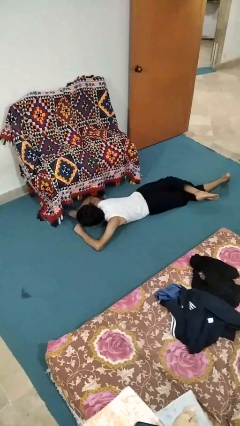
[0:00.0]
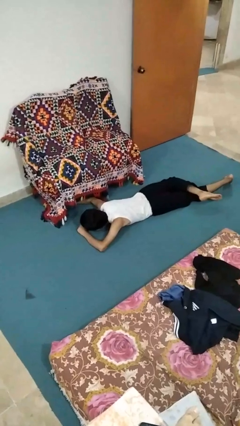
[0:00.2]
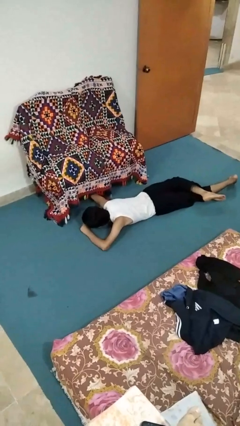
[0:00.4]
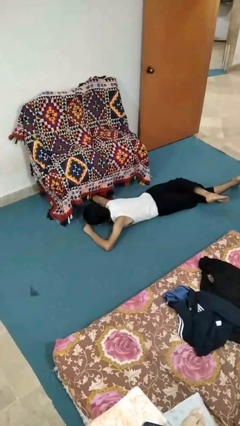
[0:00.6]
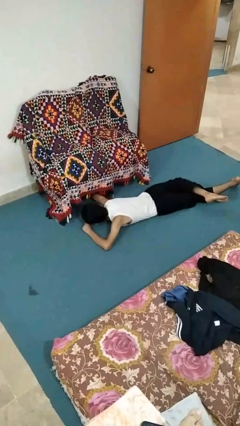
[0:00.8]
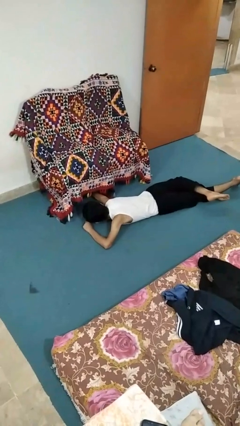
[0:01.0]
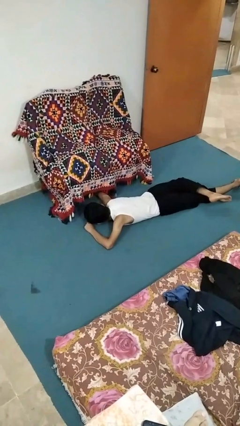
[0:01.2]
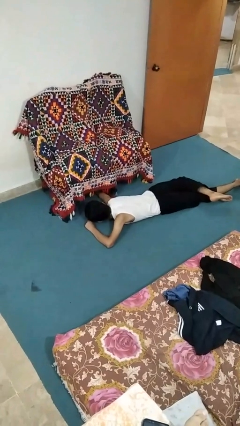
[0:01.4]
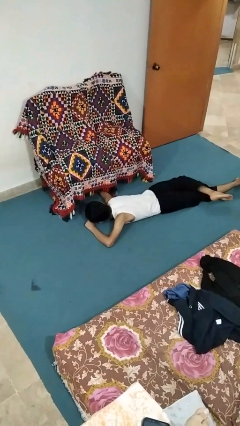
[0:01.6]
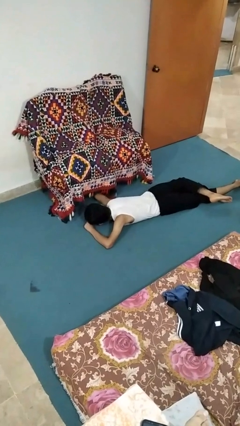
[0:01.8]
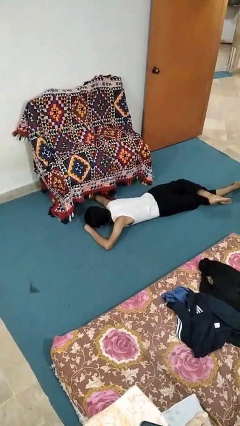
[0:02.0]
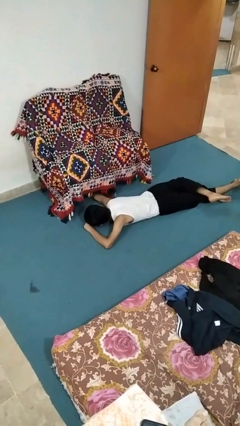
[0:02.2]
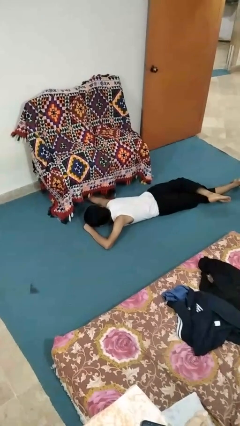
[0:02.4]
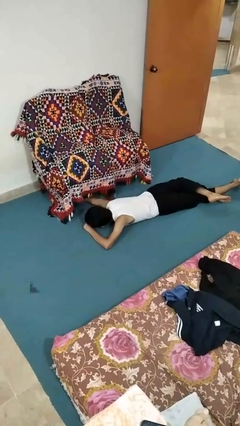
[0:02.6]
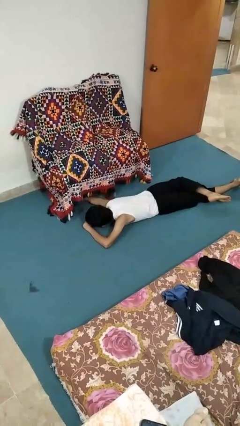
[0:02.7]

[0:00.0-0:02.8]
person searches under couch

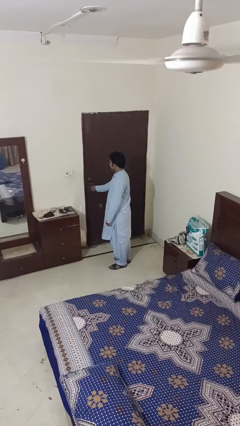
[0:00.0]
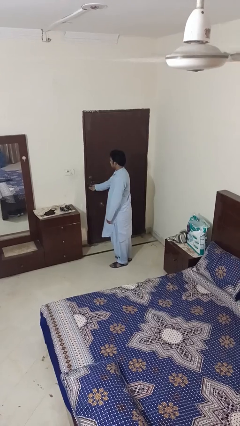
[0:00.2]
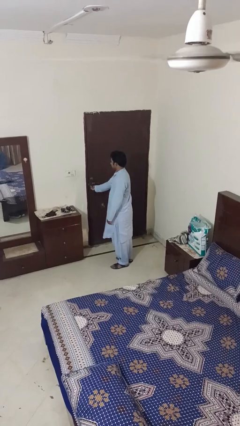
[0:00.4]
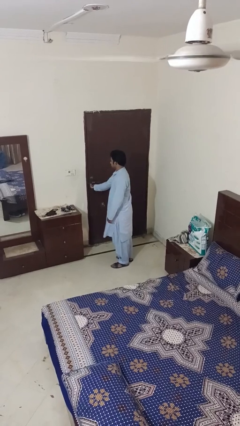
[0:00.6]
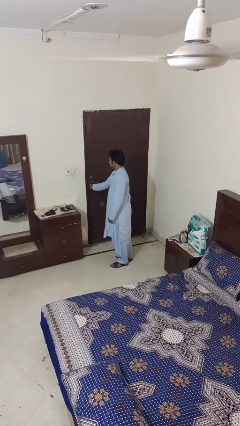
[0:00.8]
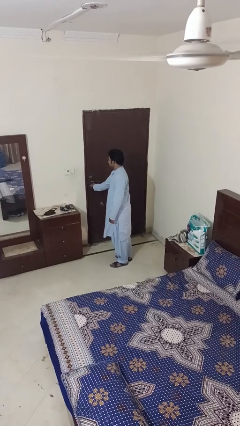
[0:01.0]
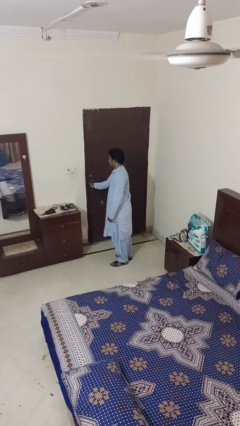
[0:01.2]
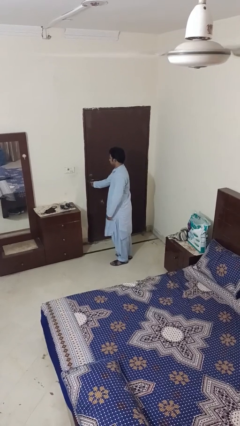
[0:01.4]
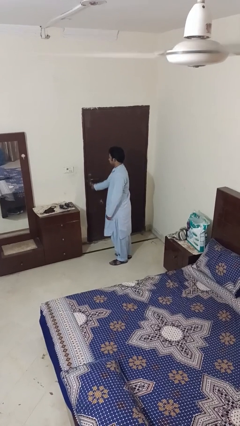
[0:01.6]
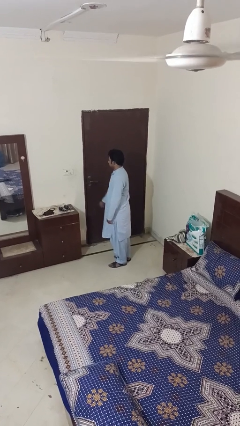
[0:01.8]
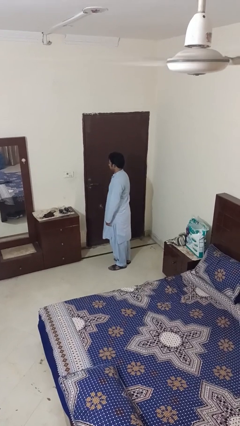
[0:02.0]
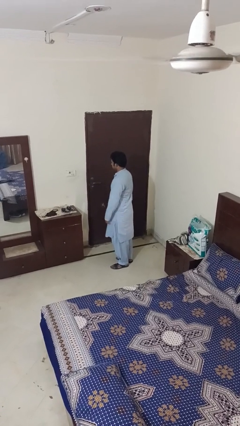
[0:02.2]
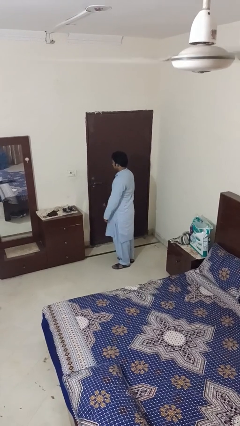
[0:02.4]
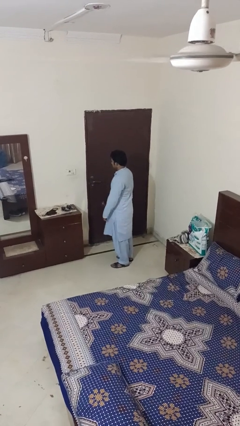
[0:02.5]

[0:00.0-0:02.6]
person locks door with keys

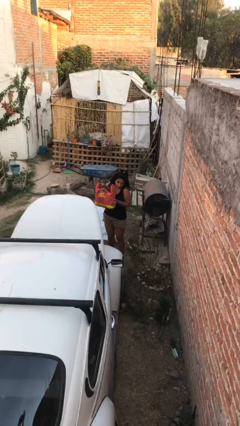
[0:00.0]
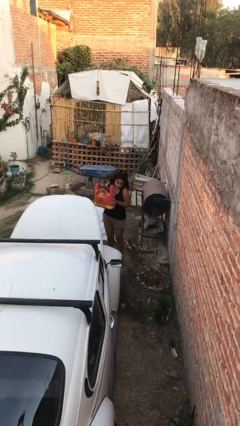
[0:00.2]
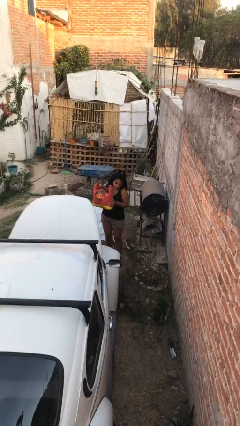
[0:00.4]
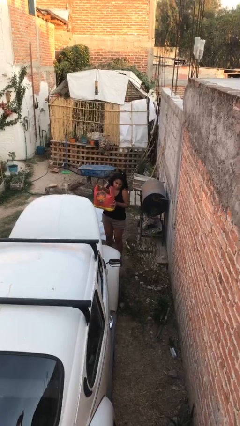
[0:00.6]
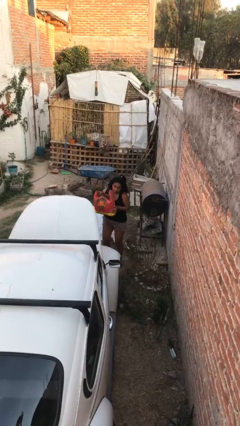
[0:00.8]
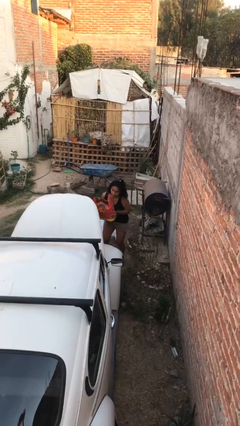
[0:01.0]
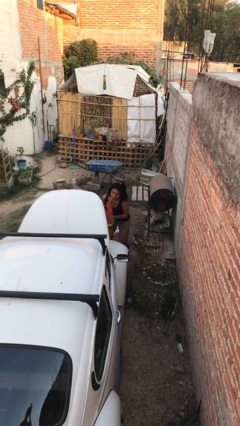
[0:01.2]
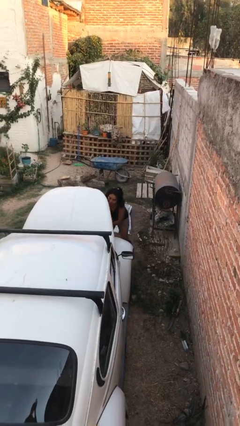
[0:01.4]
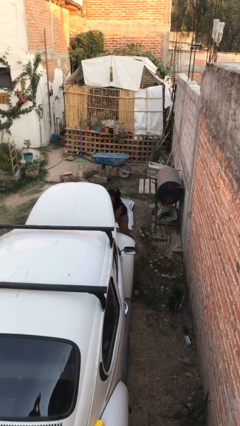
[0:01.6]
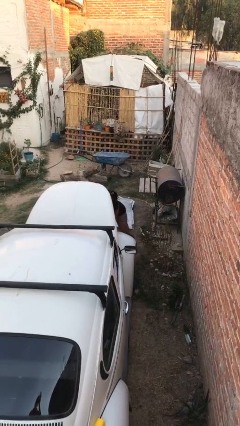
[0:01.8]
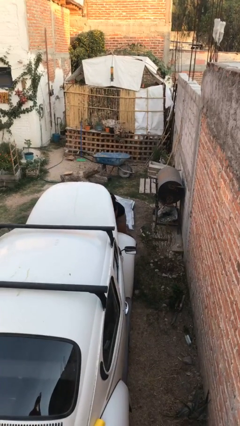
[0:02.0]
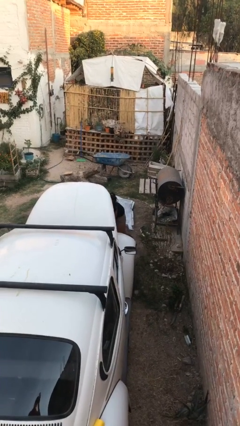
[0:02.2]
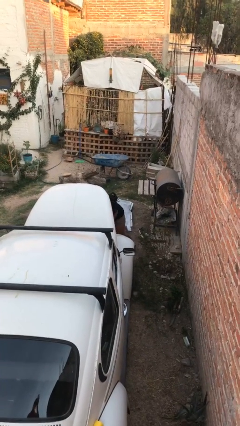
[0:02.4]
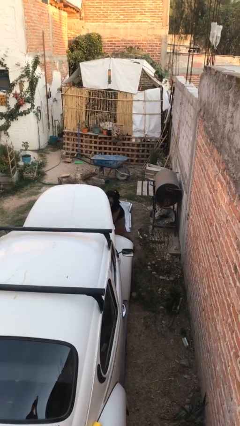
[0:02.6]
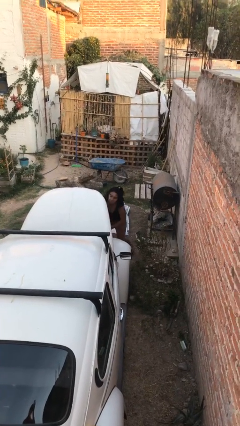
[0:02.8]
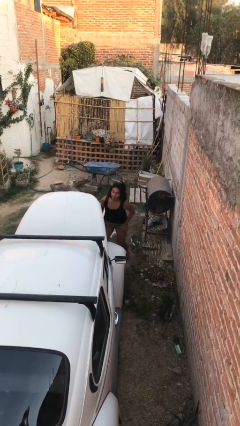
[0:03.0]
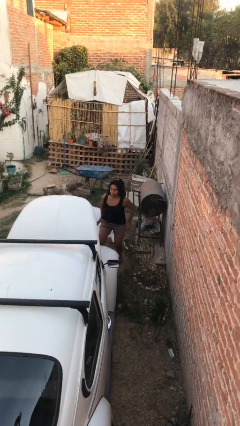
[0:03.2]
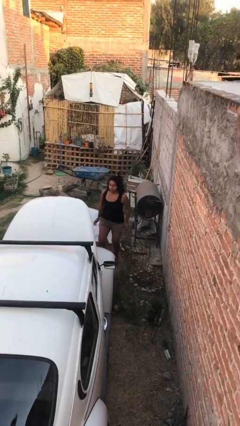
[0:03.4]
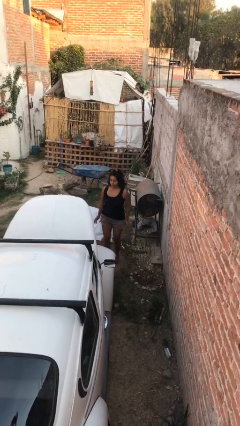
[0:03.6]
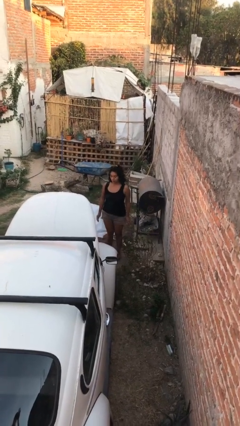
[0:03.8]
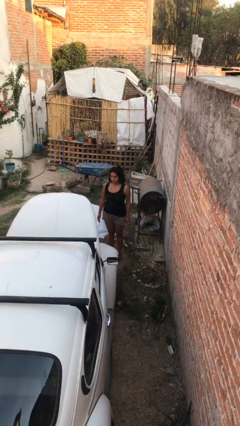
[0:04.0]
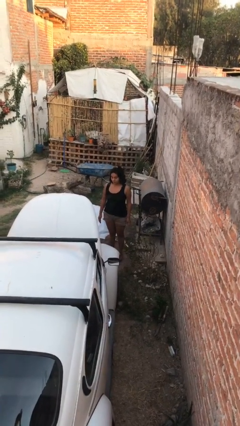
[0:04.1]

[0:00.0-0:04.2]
person loads car

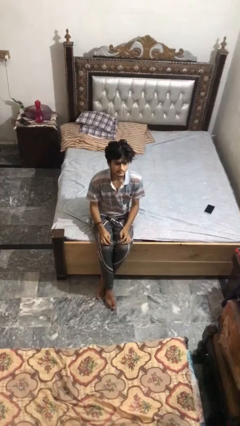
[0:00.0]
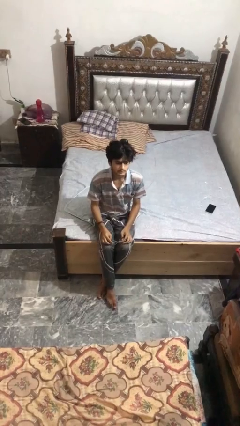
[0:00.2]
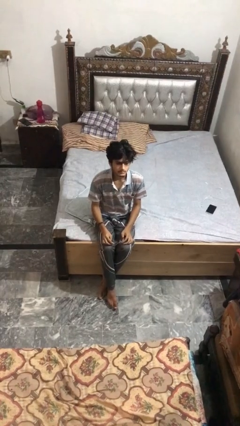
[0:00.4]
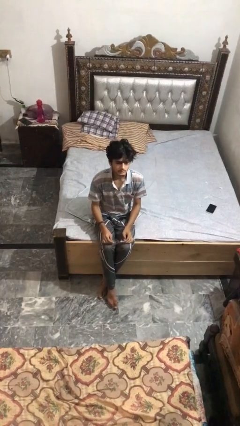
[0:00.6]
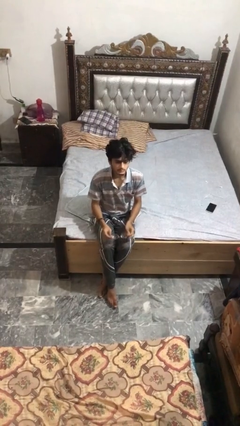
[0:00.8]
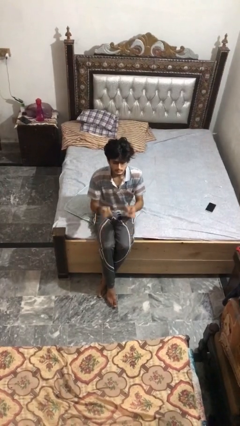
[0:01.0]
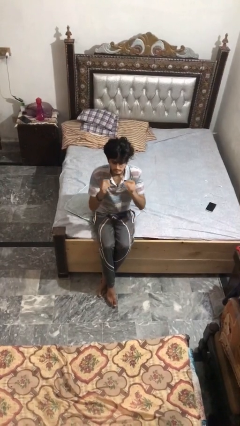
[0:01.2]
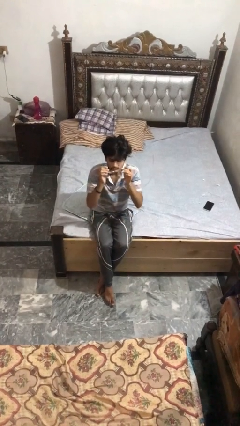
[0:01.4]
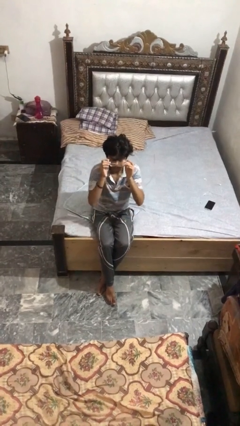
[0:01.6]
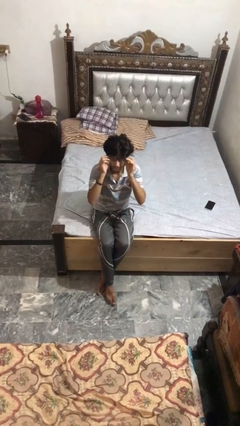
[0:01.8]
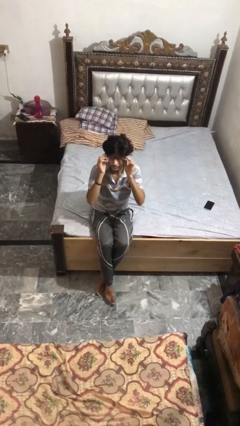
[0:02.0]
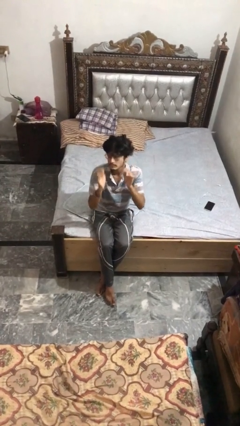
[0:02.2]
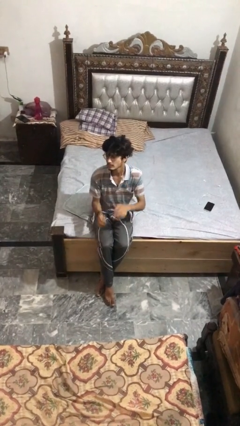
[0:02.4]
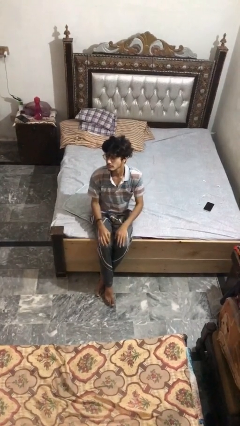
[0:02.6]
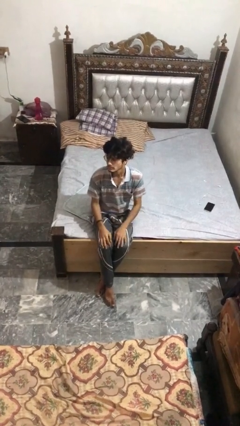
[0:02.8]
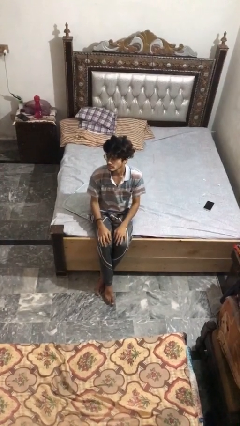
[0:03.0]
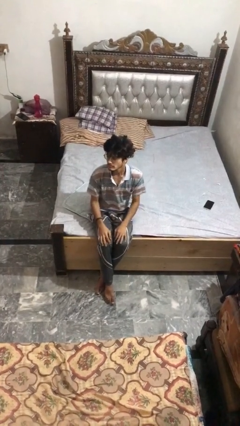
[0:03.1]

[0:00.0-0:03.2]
person puts on glasses

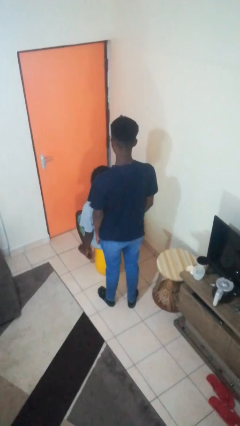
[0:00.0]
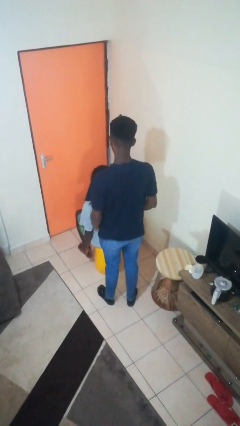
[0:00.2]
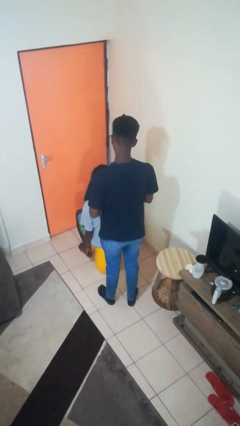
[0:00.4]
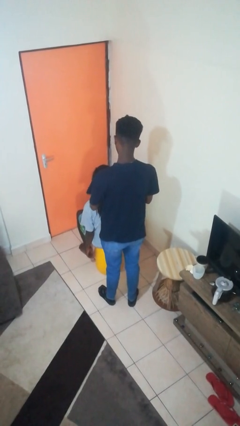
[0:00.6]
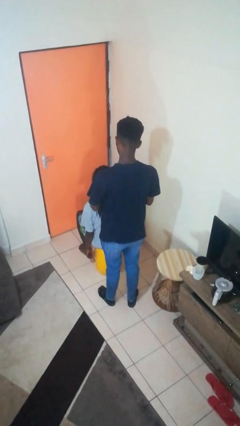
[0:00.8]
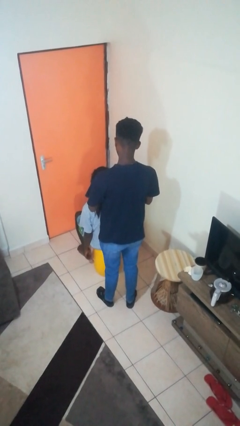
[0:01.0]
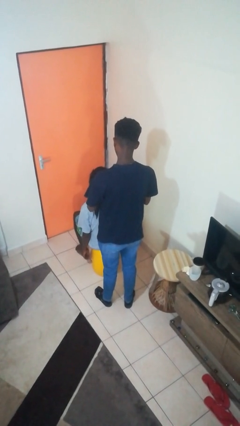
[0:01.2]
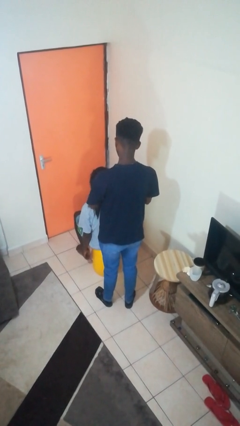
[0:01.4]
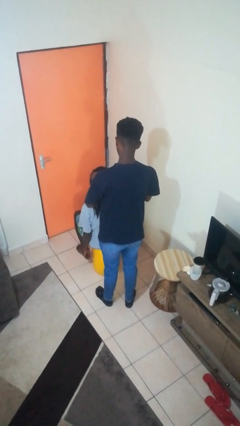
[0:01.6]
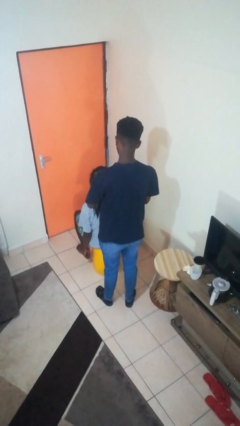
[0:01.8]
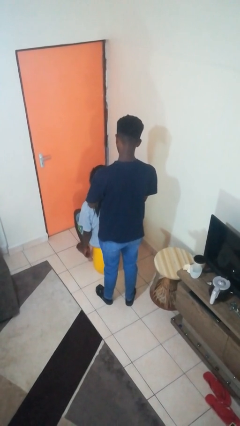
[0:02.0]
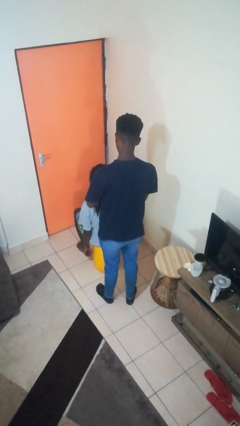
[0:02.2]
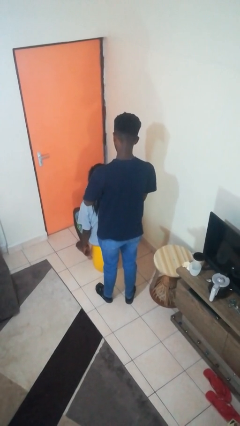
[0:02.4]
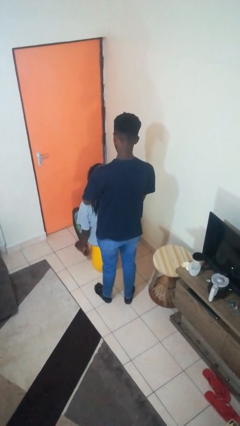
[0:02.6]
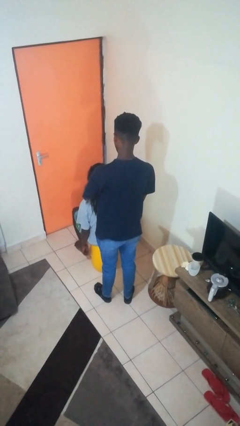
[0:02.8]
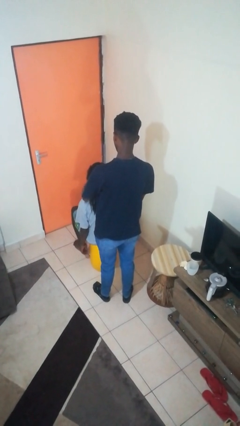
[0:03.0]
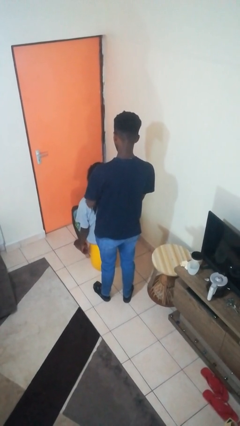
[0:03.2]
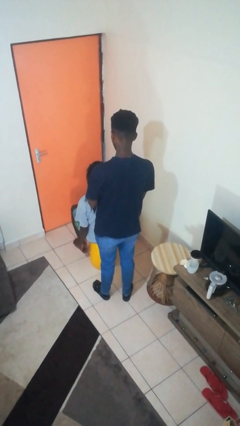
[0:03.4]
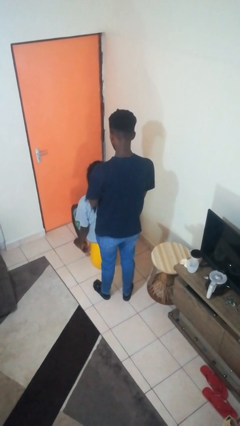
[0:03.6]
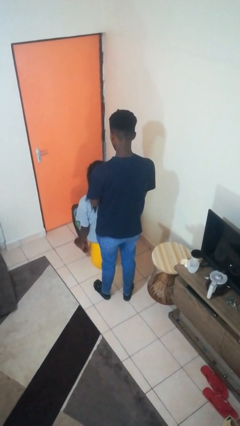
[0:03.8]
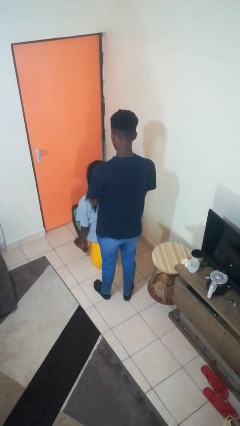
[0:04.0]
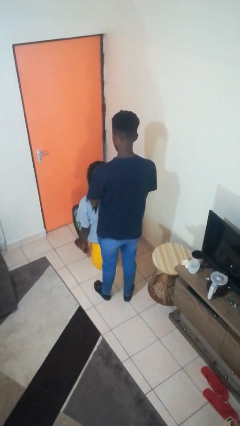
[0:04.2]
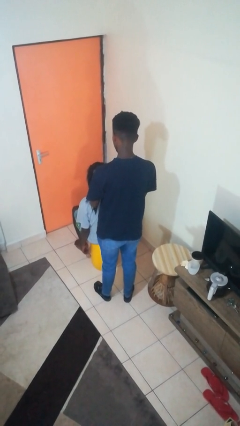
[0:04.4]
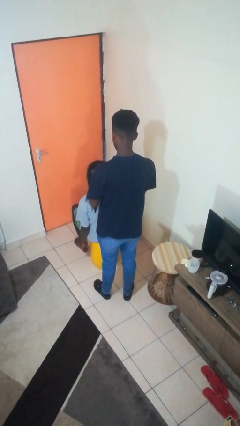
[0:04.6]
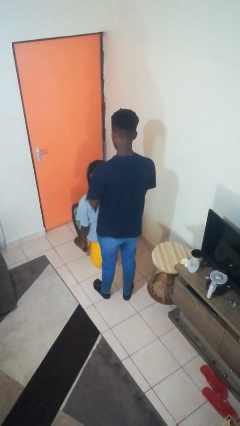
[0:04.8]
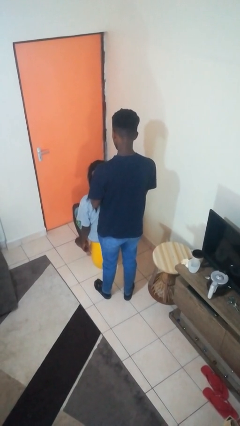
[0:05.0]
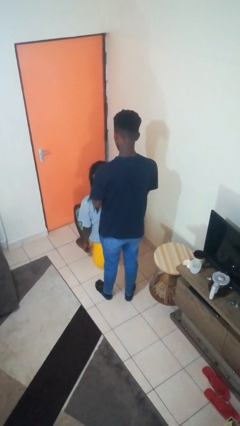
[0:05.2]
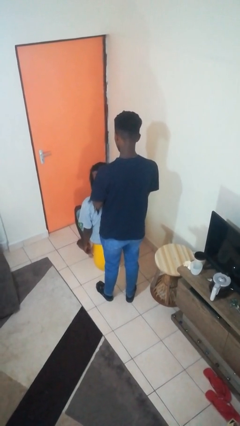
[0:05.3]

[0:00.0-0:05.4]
person braids hair of person
